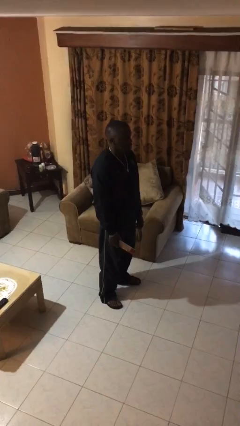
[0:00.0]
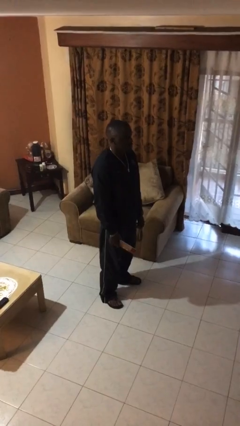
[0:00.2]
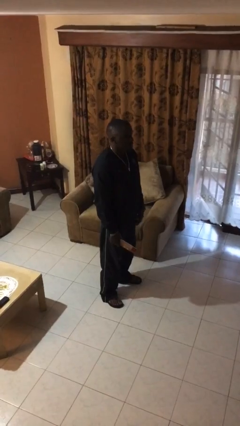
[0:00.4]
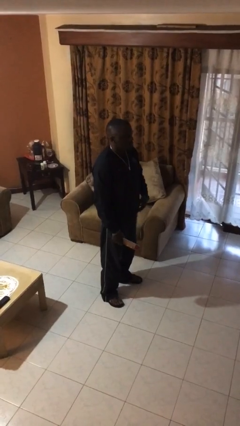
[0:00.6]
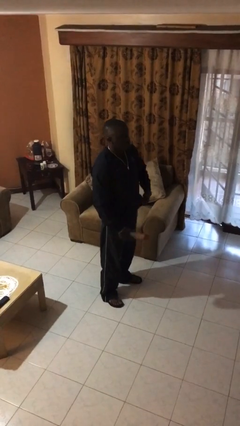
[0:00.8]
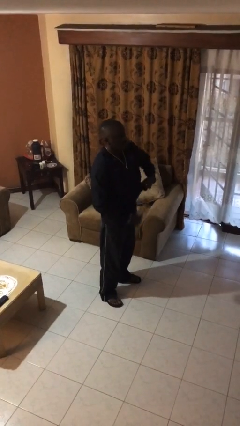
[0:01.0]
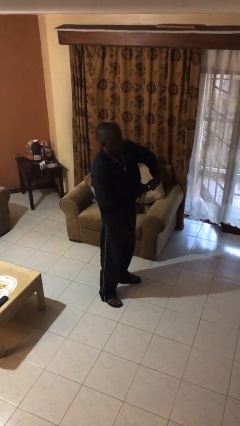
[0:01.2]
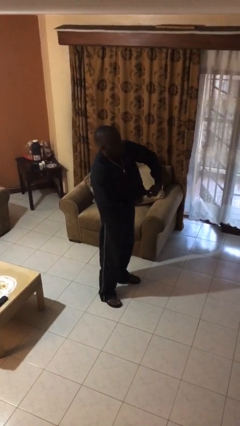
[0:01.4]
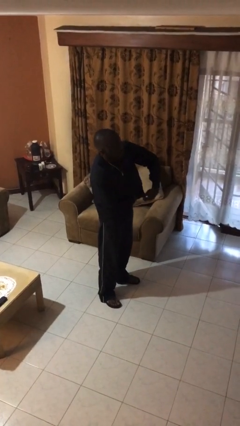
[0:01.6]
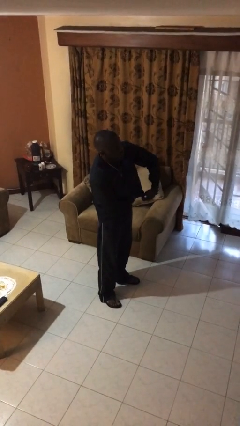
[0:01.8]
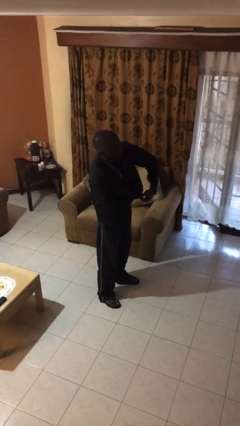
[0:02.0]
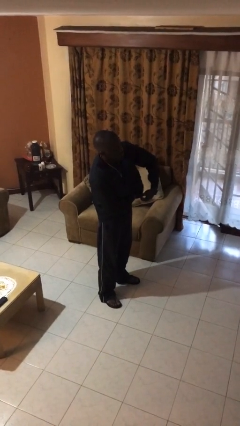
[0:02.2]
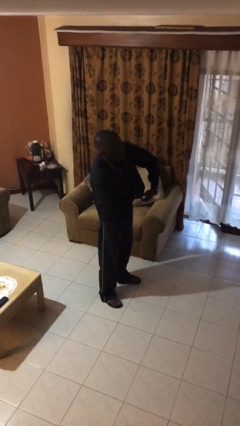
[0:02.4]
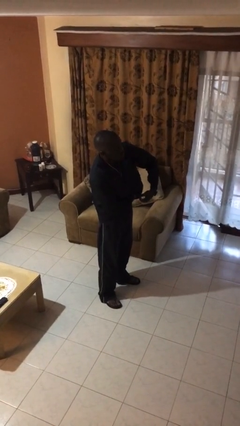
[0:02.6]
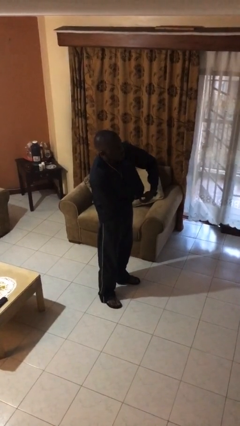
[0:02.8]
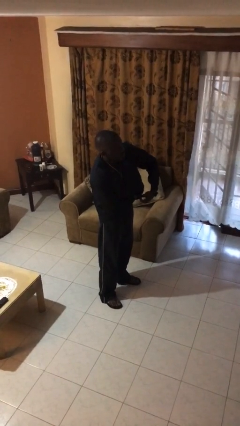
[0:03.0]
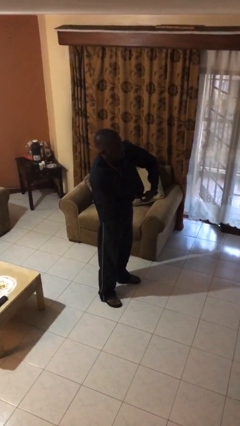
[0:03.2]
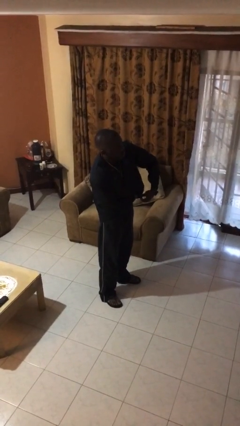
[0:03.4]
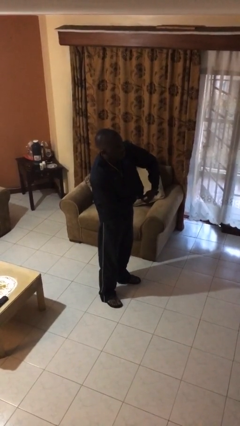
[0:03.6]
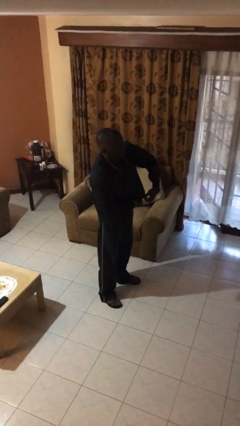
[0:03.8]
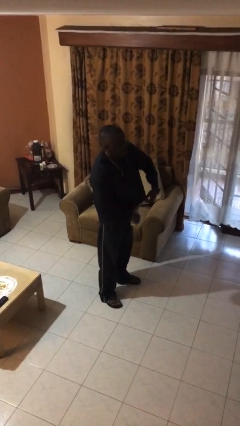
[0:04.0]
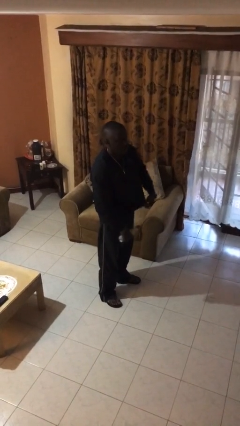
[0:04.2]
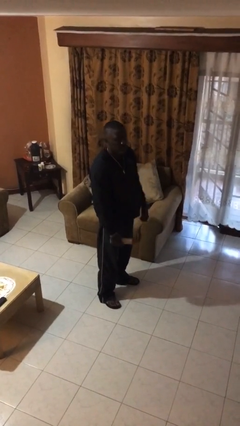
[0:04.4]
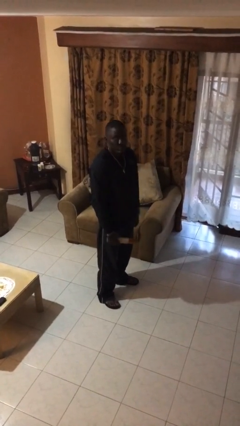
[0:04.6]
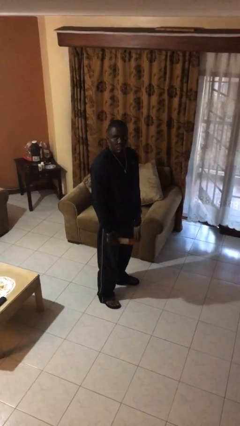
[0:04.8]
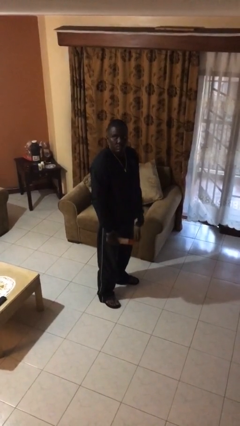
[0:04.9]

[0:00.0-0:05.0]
person applies deodorant

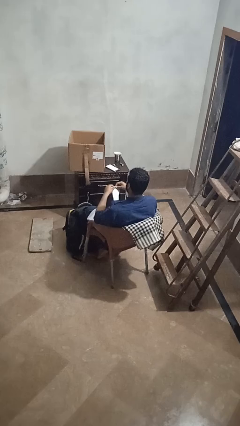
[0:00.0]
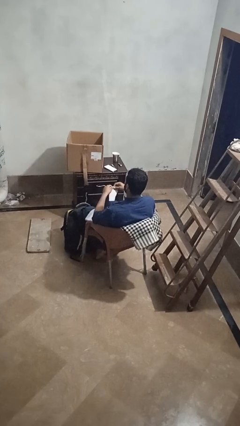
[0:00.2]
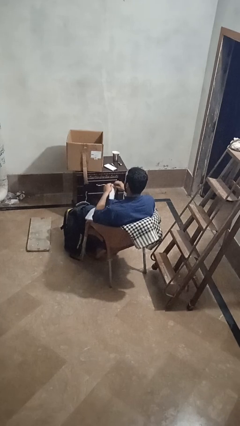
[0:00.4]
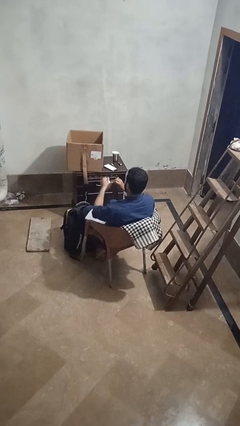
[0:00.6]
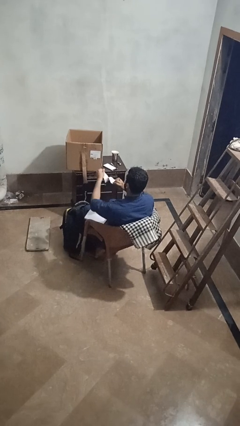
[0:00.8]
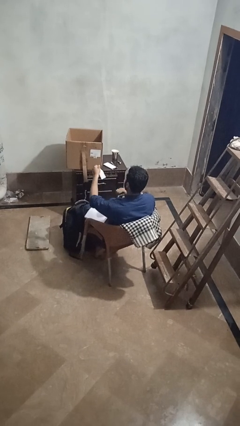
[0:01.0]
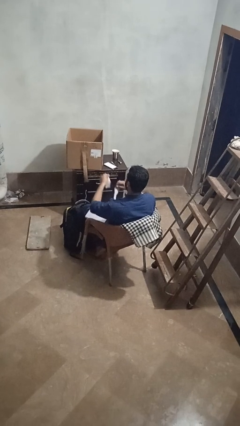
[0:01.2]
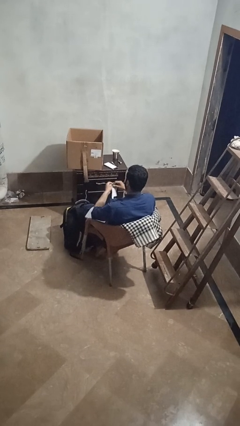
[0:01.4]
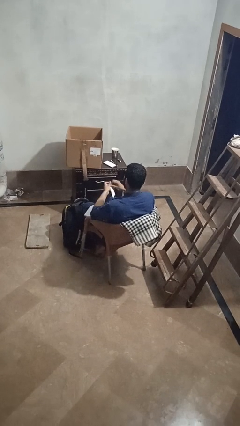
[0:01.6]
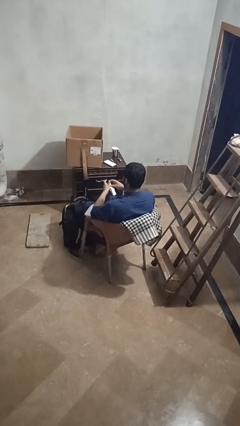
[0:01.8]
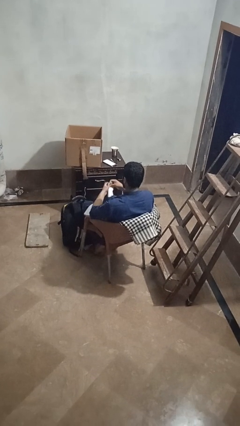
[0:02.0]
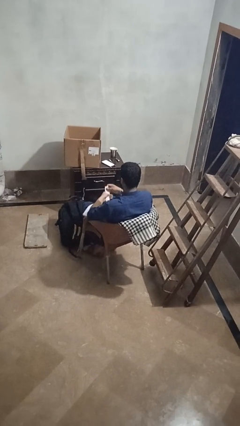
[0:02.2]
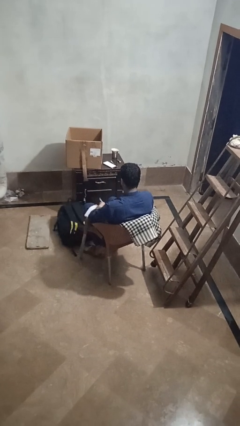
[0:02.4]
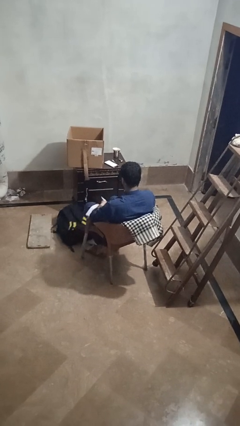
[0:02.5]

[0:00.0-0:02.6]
person tears paper

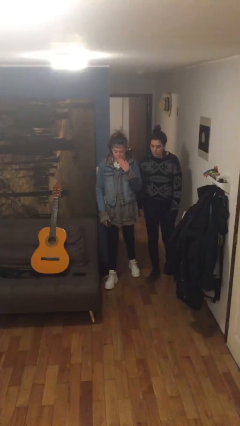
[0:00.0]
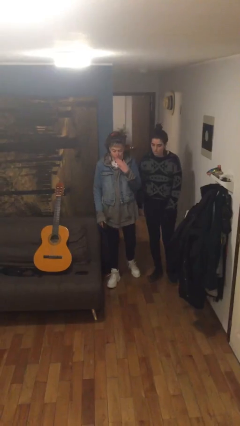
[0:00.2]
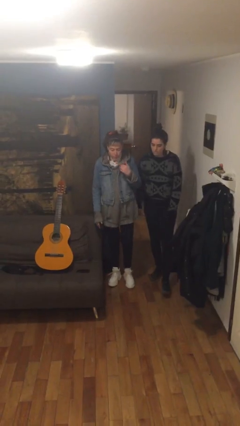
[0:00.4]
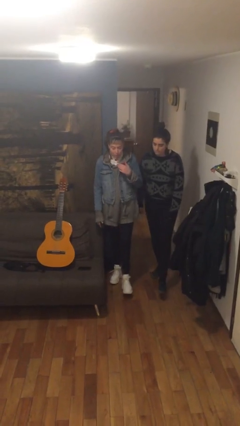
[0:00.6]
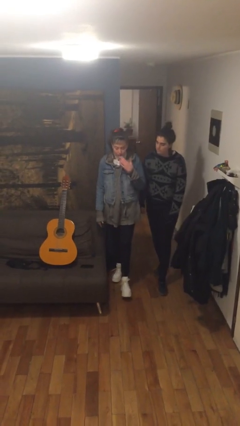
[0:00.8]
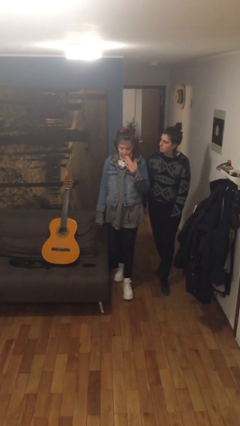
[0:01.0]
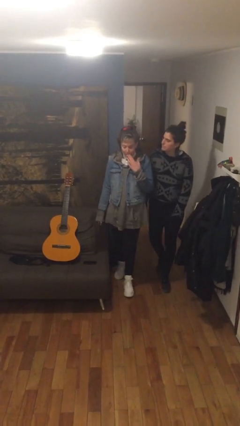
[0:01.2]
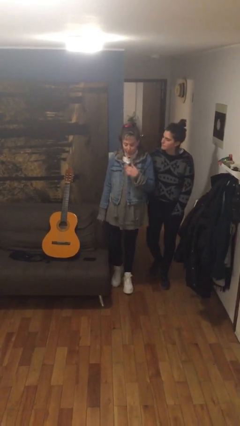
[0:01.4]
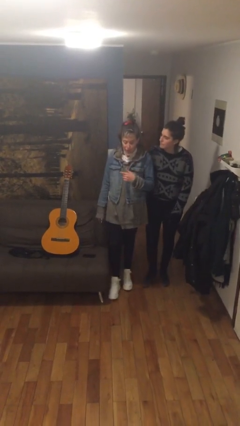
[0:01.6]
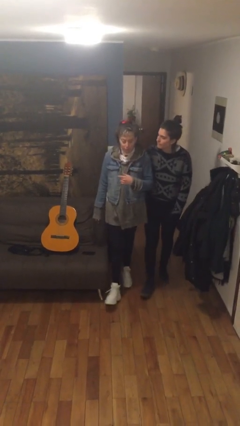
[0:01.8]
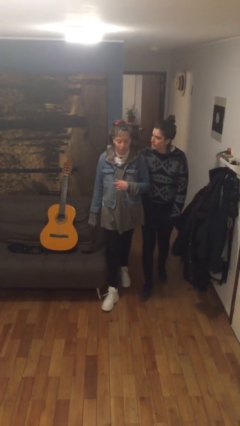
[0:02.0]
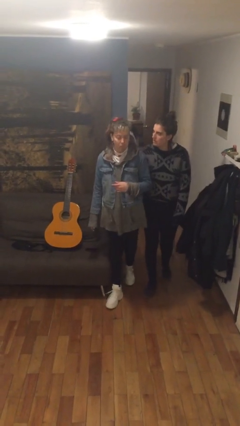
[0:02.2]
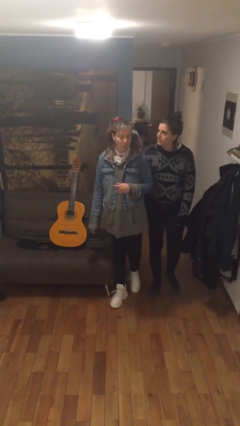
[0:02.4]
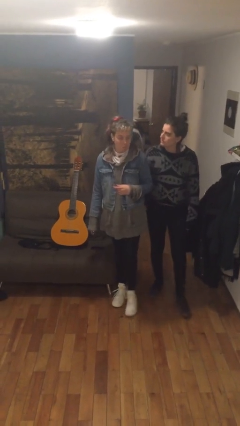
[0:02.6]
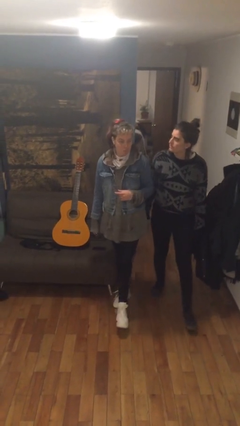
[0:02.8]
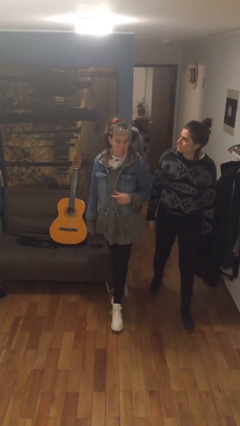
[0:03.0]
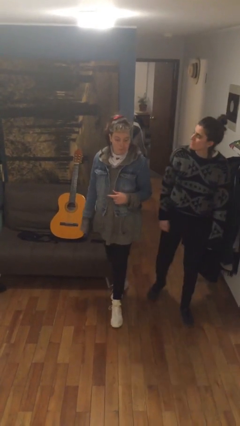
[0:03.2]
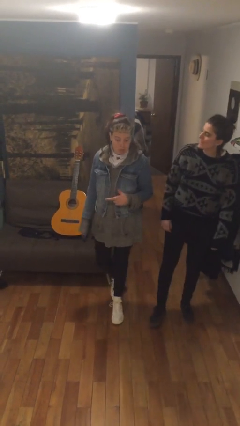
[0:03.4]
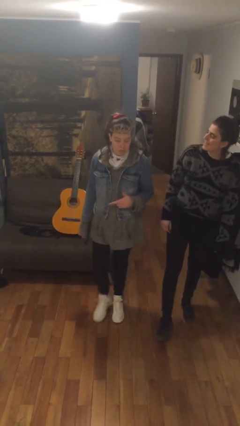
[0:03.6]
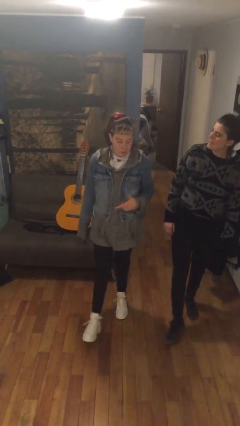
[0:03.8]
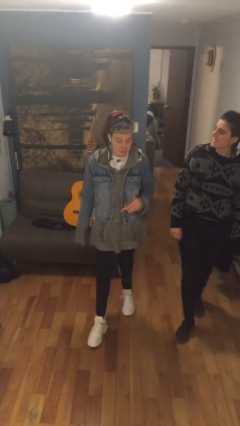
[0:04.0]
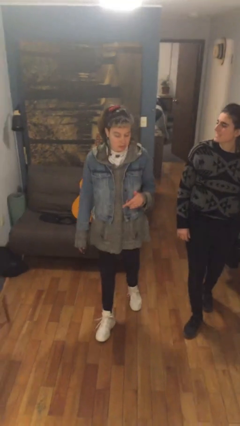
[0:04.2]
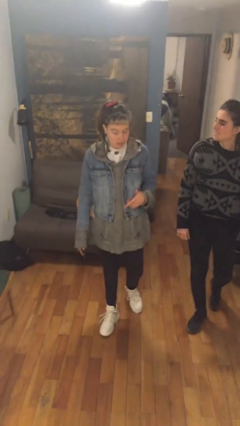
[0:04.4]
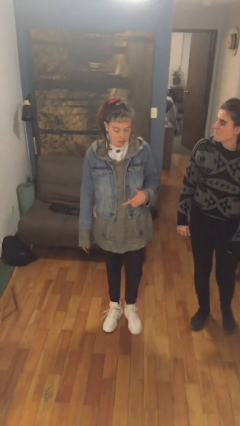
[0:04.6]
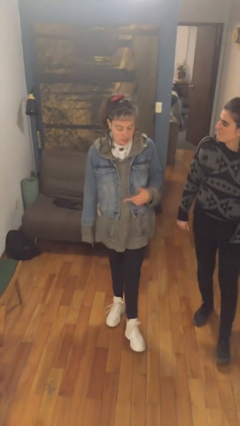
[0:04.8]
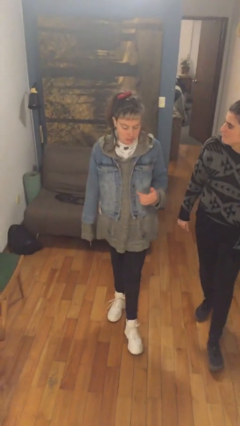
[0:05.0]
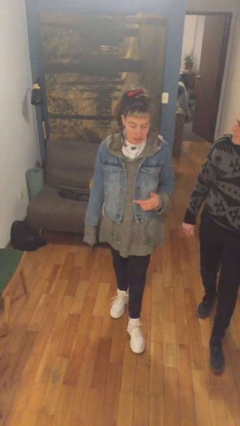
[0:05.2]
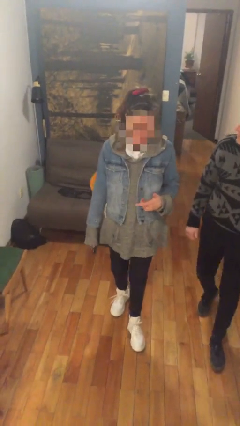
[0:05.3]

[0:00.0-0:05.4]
person talks to person

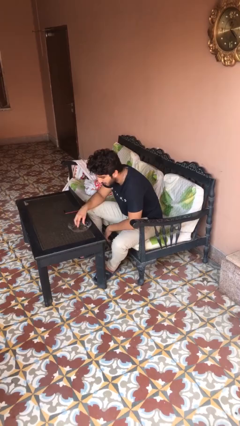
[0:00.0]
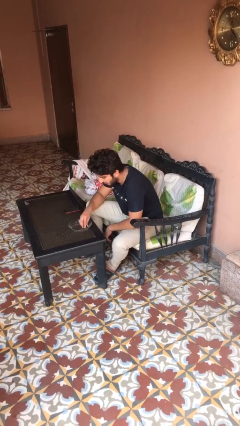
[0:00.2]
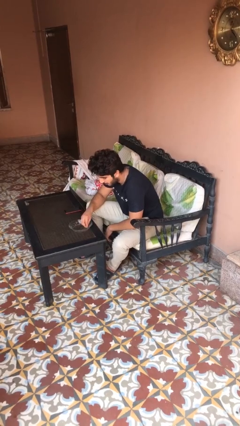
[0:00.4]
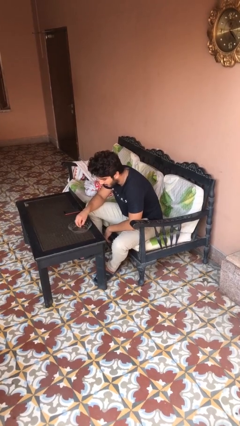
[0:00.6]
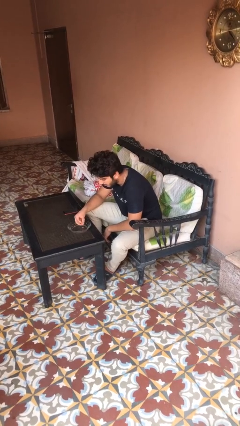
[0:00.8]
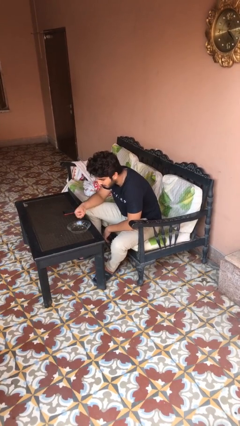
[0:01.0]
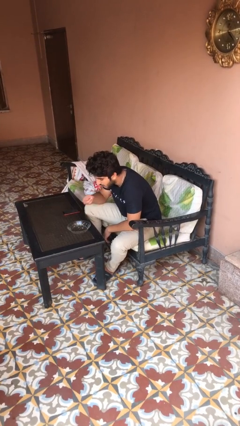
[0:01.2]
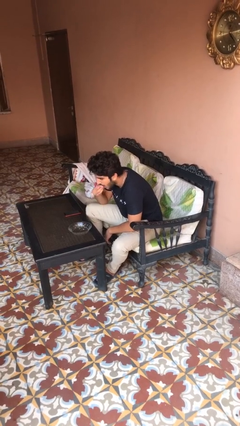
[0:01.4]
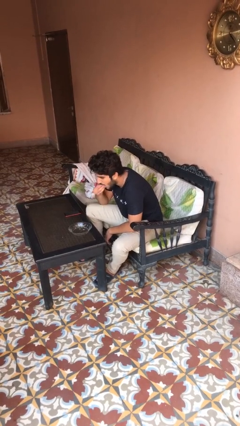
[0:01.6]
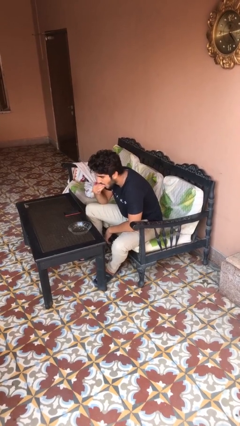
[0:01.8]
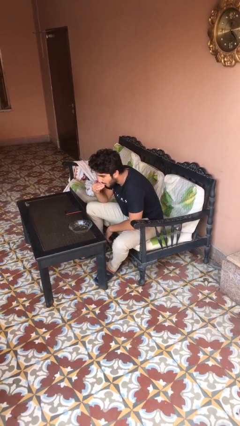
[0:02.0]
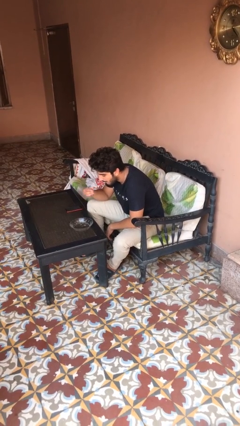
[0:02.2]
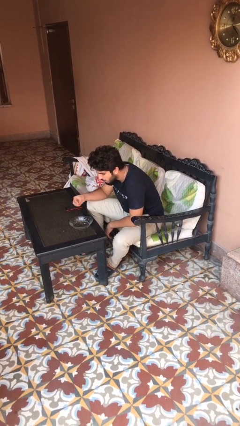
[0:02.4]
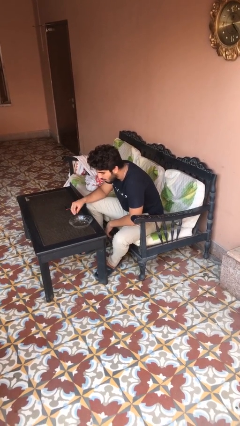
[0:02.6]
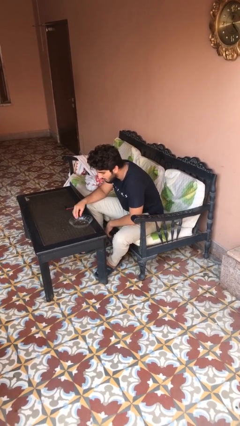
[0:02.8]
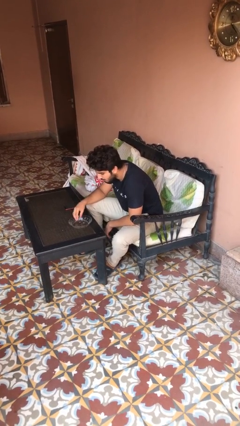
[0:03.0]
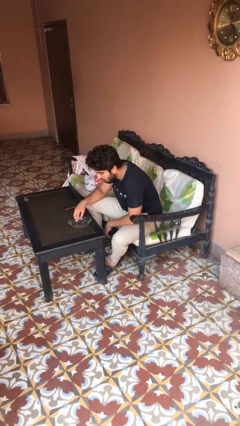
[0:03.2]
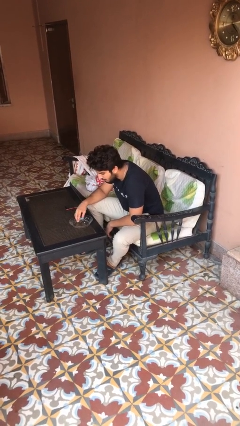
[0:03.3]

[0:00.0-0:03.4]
person eats with hands

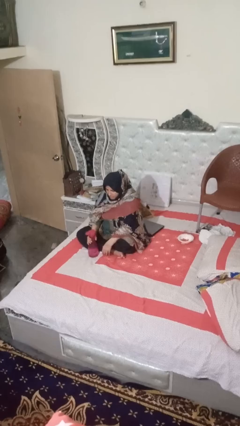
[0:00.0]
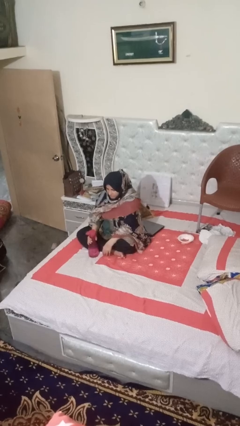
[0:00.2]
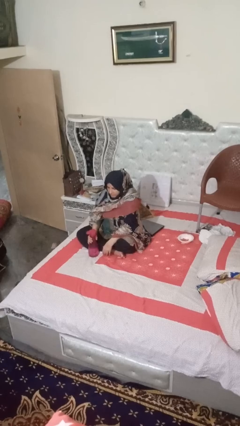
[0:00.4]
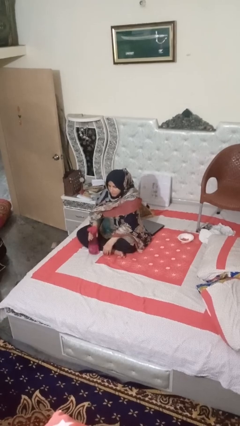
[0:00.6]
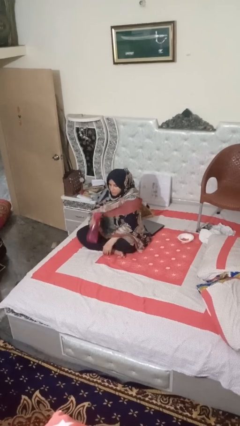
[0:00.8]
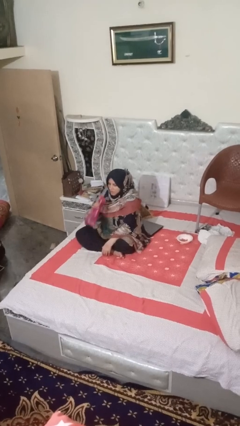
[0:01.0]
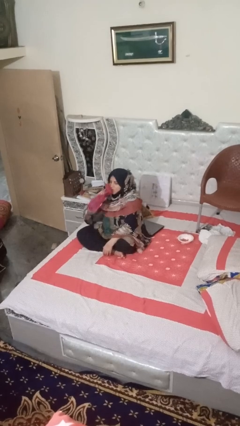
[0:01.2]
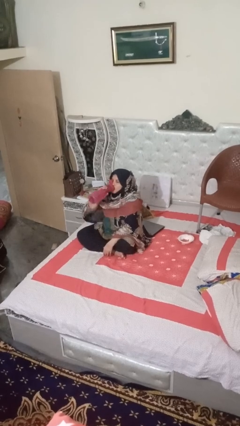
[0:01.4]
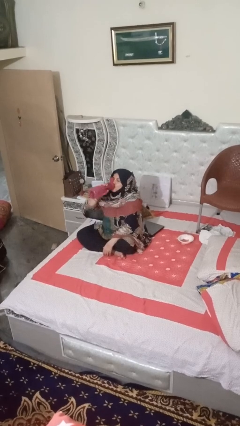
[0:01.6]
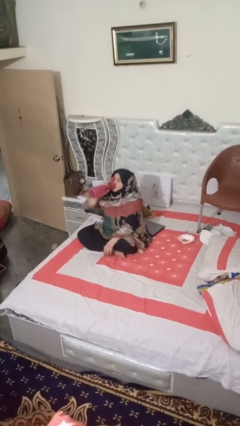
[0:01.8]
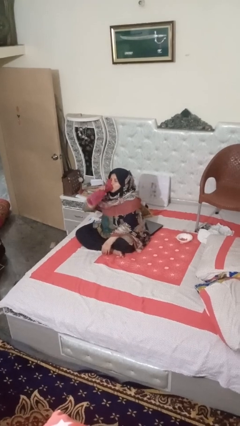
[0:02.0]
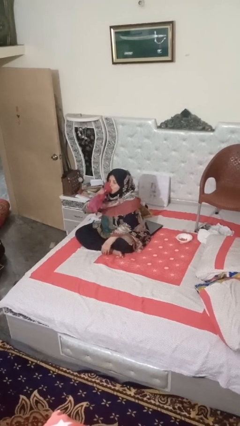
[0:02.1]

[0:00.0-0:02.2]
person drinks from bottle
